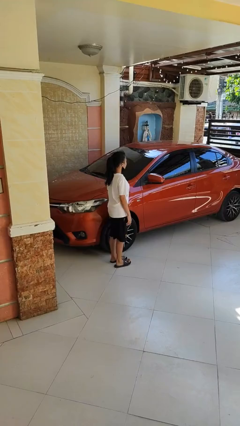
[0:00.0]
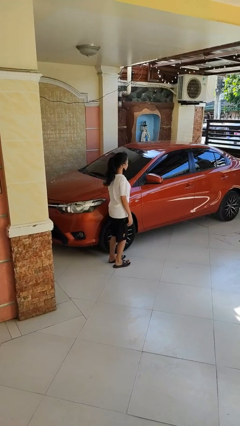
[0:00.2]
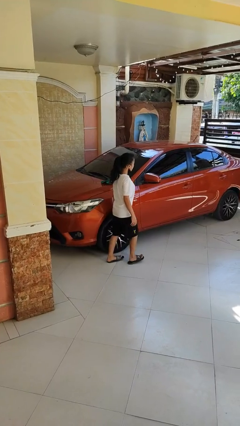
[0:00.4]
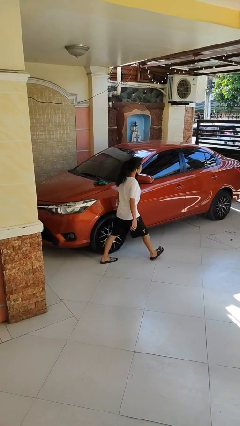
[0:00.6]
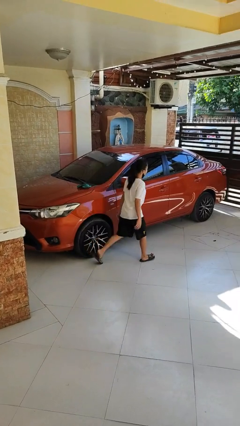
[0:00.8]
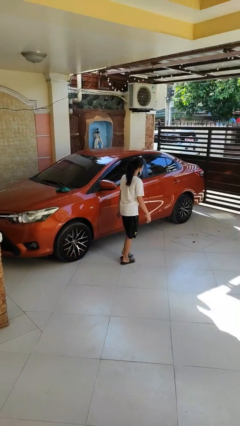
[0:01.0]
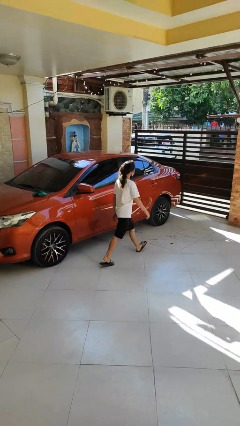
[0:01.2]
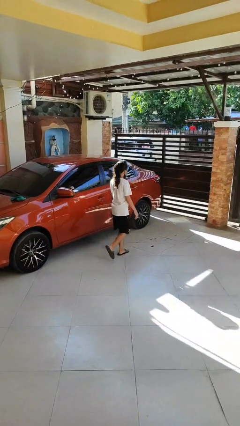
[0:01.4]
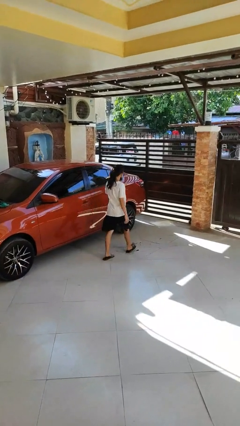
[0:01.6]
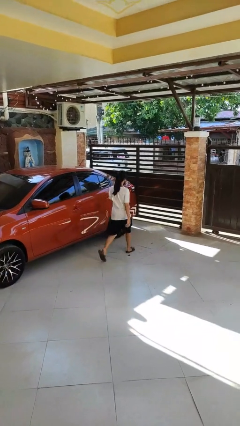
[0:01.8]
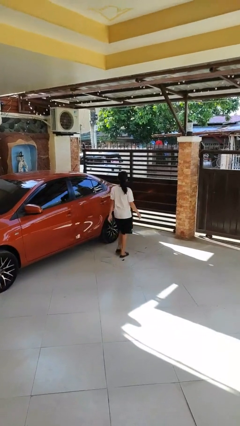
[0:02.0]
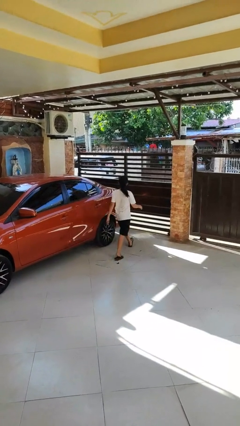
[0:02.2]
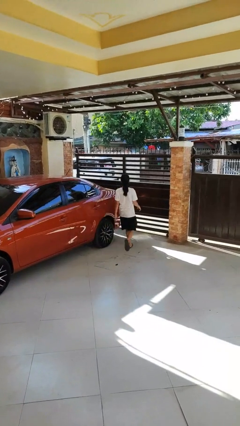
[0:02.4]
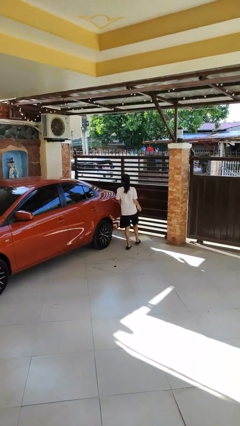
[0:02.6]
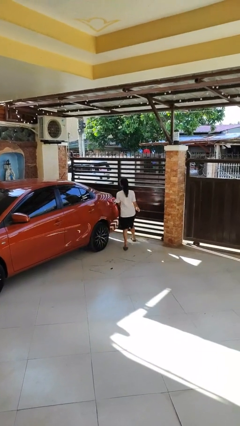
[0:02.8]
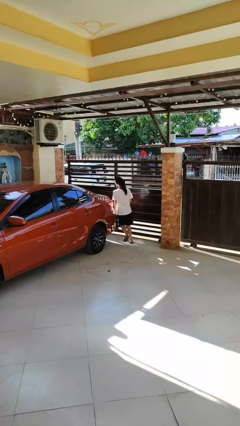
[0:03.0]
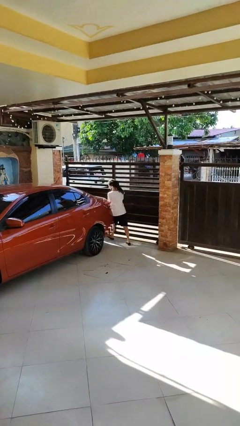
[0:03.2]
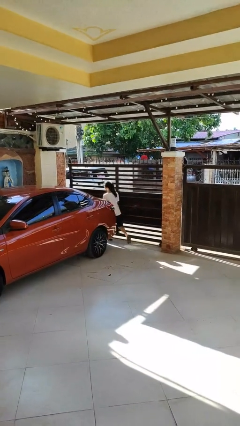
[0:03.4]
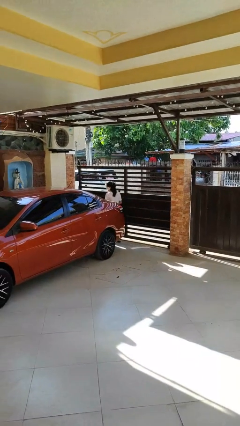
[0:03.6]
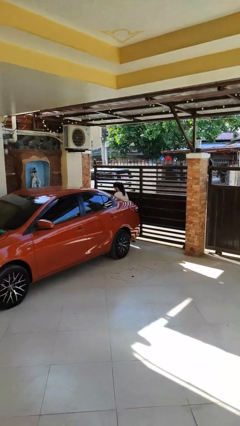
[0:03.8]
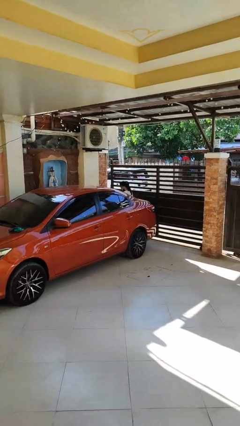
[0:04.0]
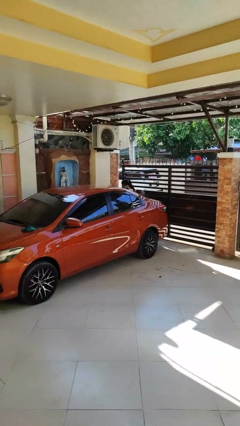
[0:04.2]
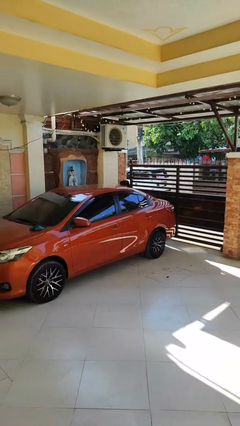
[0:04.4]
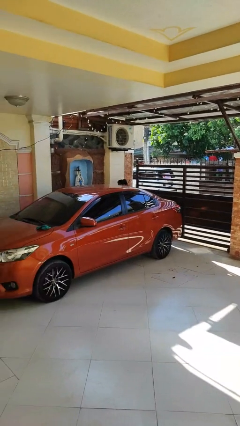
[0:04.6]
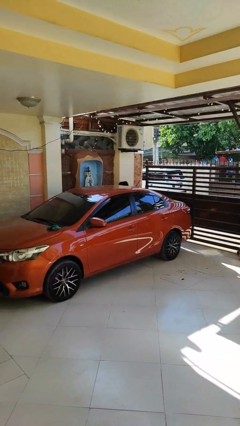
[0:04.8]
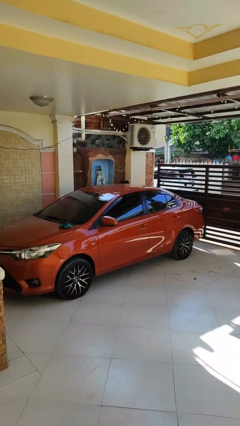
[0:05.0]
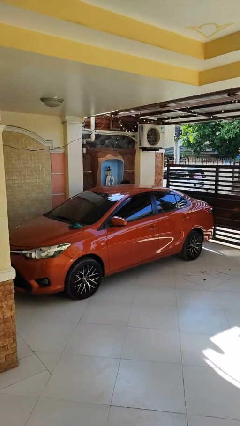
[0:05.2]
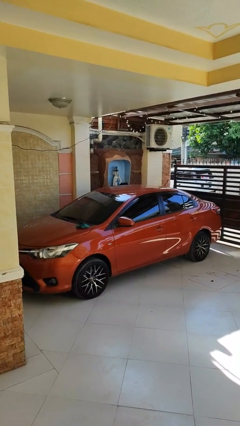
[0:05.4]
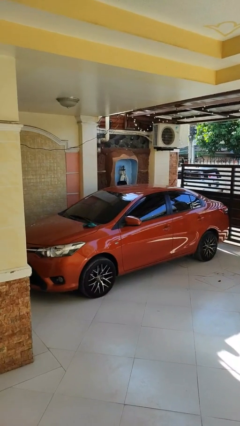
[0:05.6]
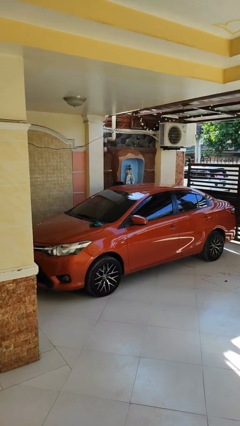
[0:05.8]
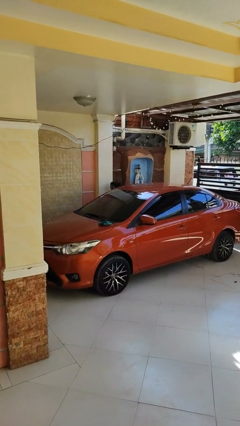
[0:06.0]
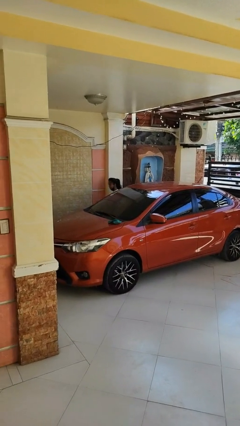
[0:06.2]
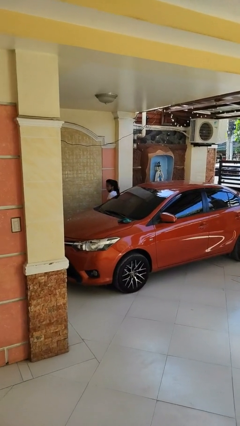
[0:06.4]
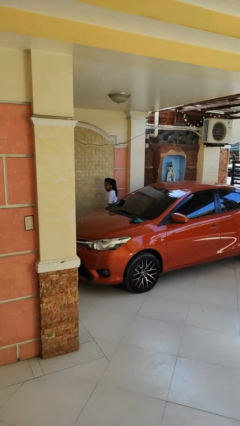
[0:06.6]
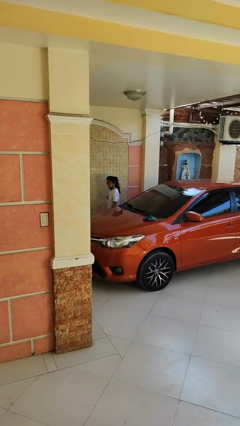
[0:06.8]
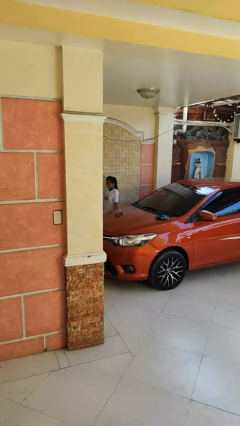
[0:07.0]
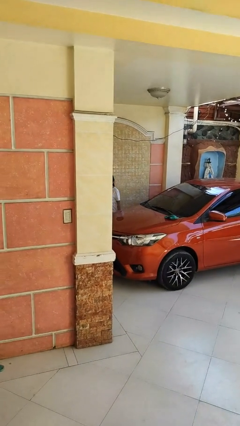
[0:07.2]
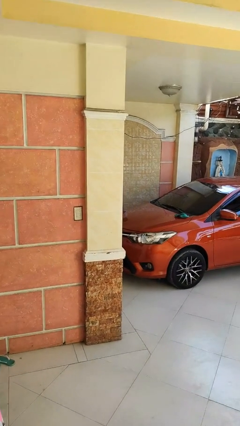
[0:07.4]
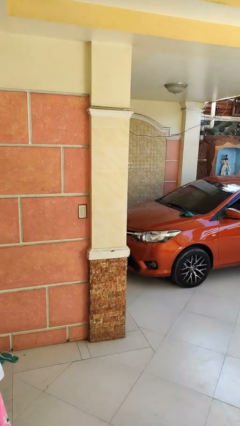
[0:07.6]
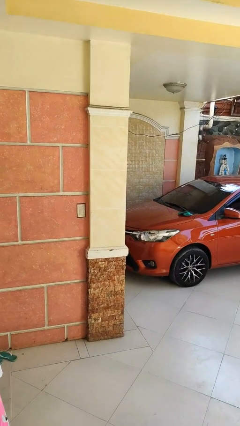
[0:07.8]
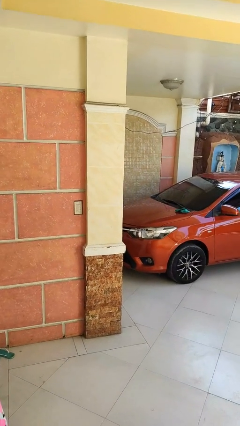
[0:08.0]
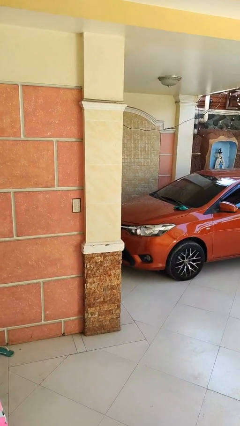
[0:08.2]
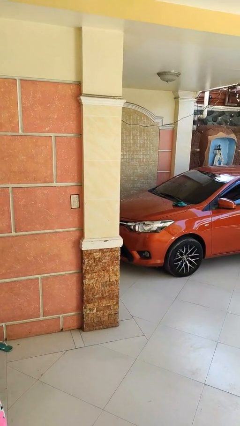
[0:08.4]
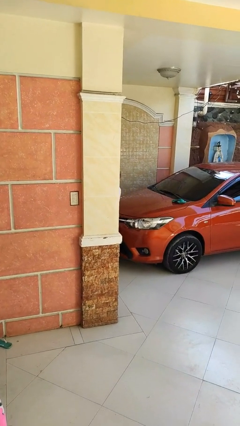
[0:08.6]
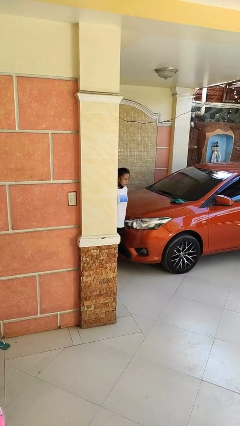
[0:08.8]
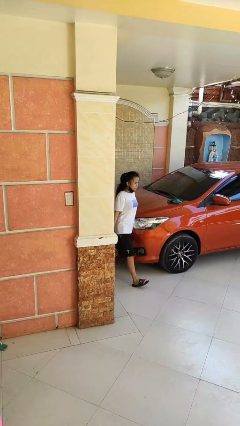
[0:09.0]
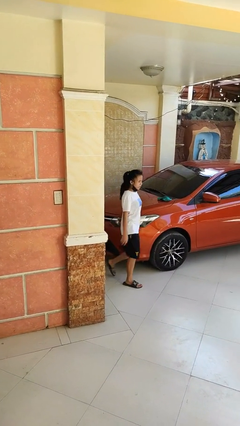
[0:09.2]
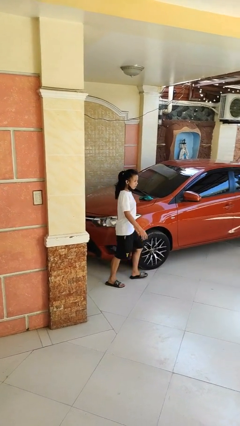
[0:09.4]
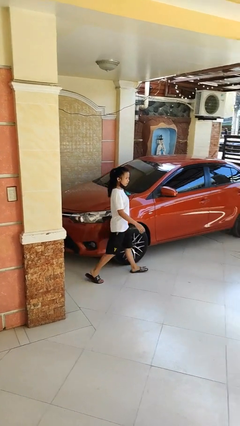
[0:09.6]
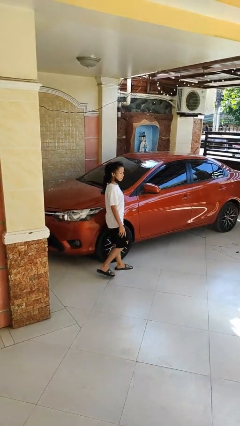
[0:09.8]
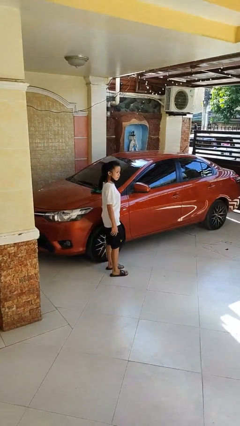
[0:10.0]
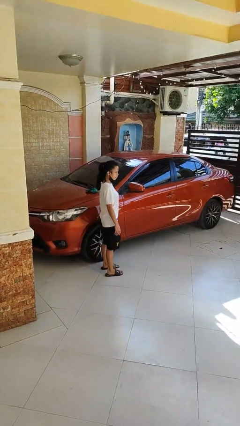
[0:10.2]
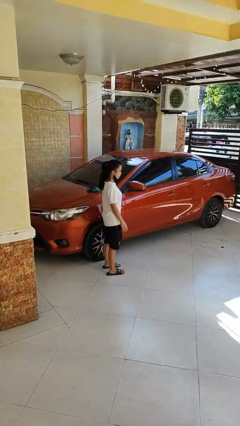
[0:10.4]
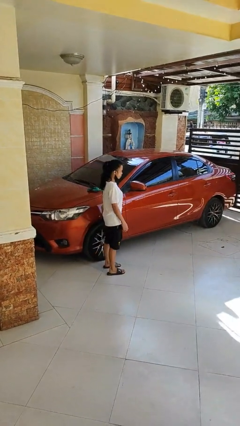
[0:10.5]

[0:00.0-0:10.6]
person walks around car

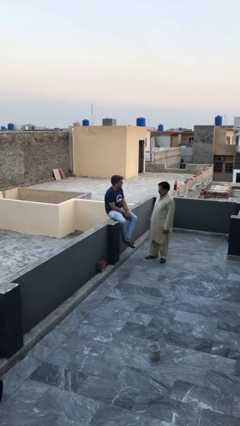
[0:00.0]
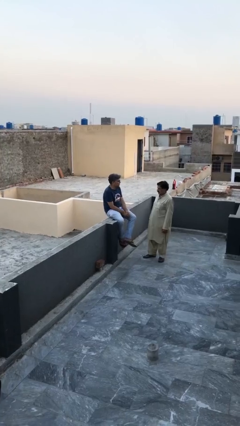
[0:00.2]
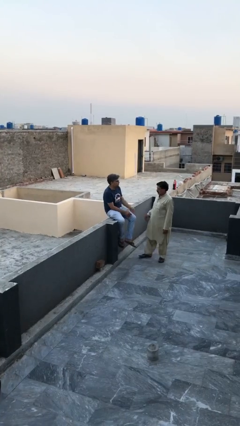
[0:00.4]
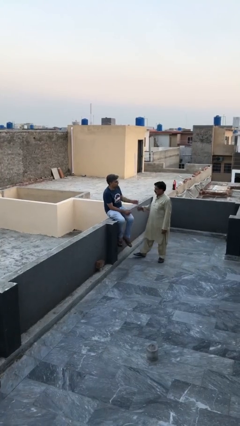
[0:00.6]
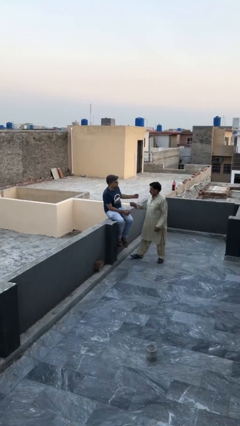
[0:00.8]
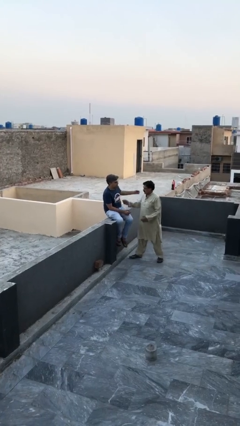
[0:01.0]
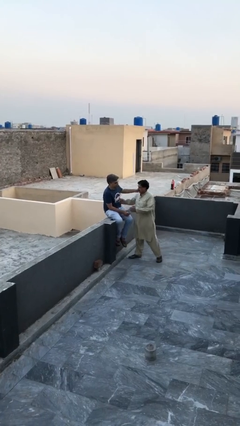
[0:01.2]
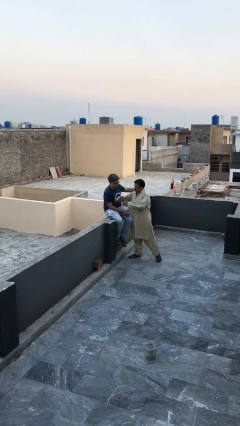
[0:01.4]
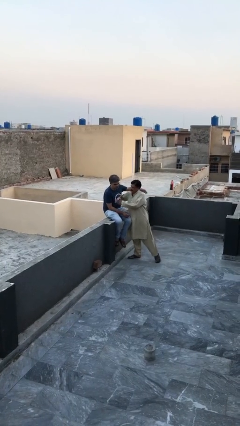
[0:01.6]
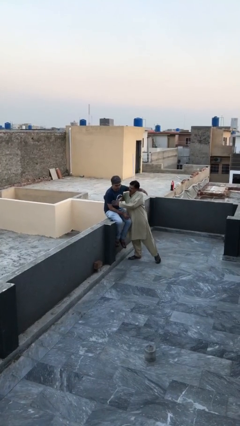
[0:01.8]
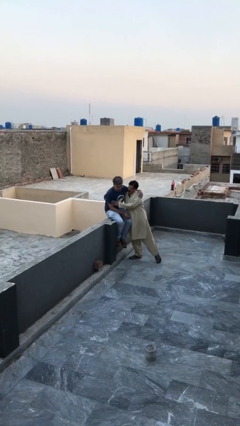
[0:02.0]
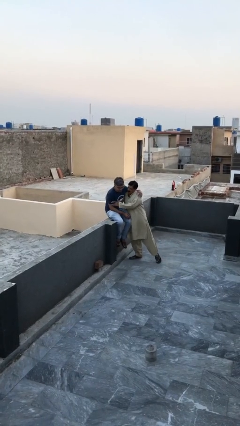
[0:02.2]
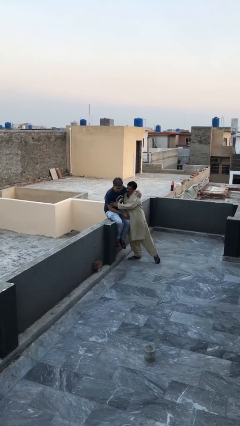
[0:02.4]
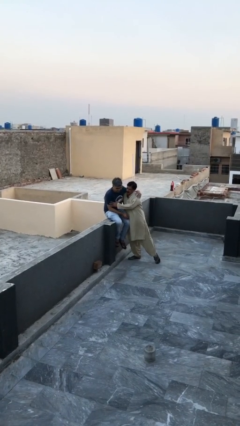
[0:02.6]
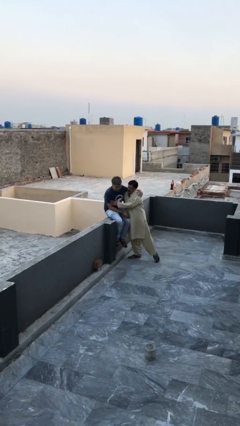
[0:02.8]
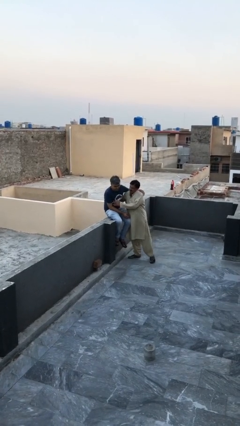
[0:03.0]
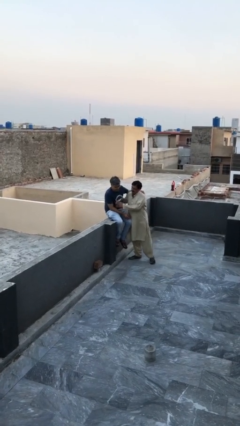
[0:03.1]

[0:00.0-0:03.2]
person embraces person

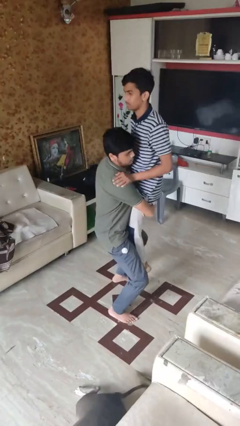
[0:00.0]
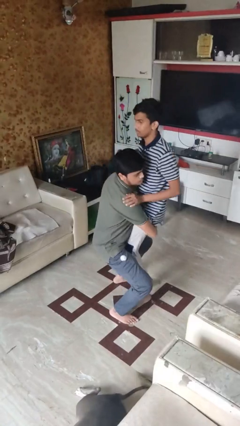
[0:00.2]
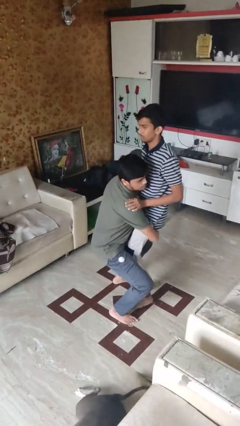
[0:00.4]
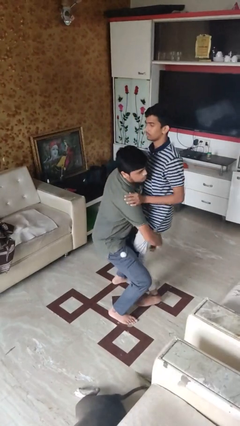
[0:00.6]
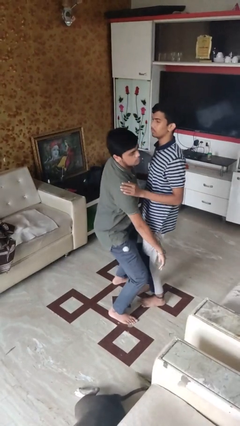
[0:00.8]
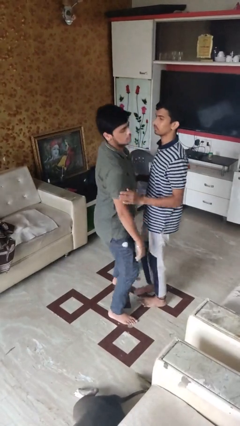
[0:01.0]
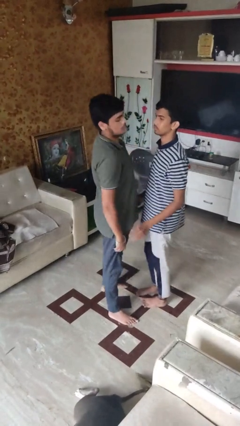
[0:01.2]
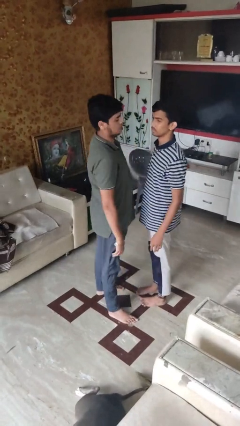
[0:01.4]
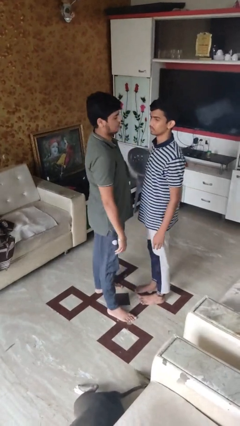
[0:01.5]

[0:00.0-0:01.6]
person puts down person

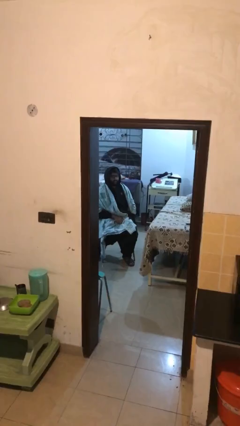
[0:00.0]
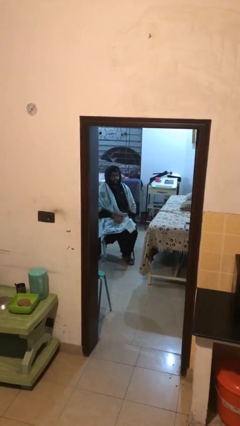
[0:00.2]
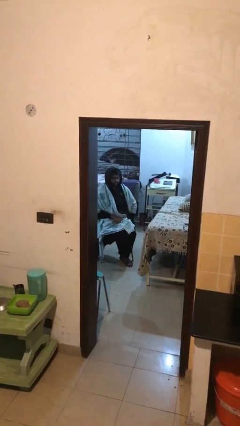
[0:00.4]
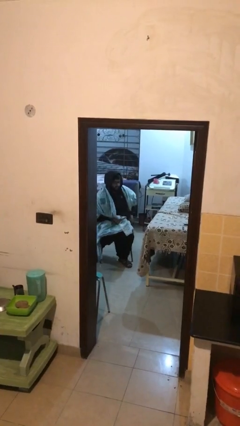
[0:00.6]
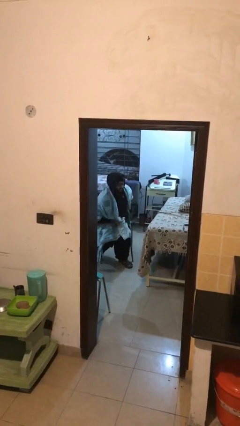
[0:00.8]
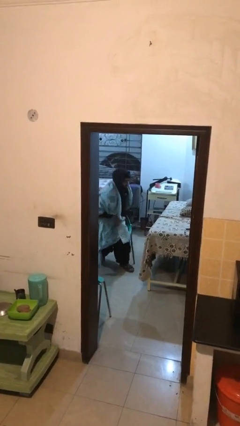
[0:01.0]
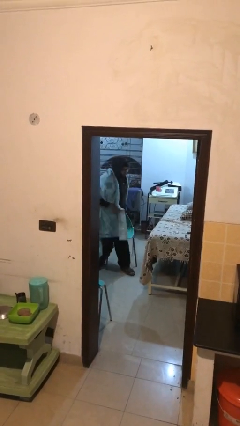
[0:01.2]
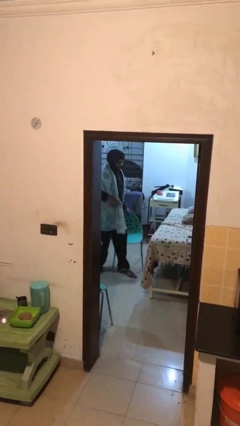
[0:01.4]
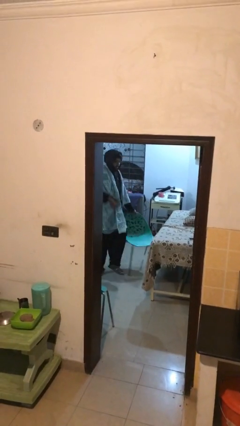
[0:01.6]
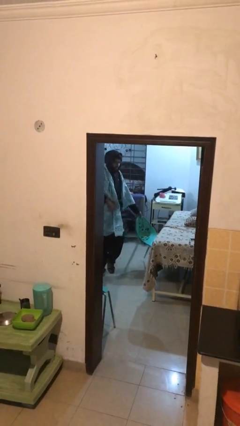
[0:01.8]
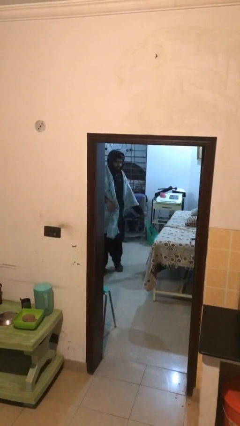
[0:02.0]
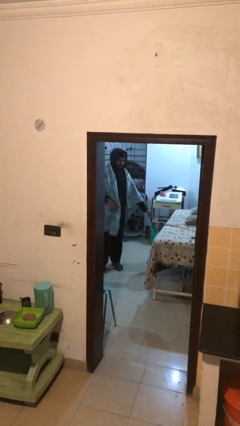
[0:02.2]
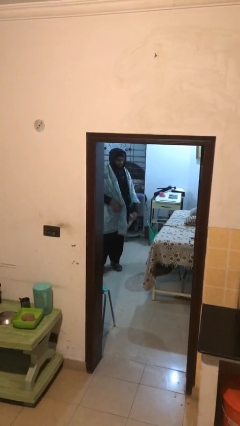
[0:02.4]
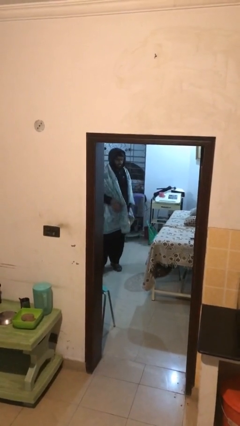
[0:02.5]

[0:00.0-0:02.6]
person stands up
